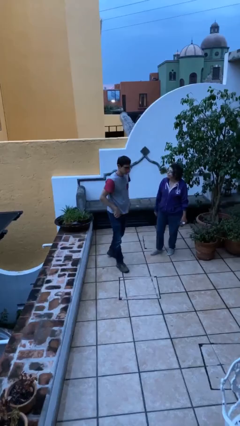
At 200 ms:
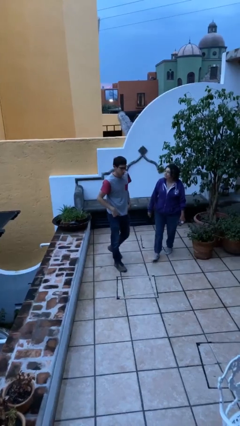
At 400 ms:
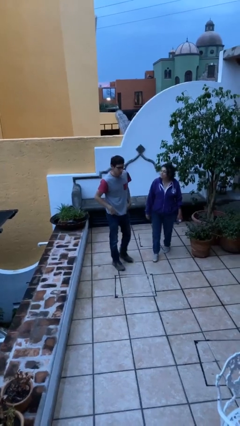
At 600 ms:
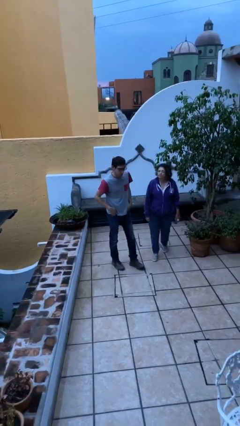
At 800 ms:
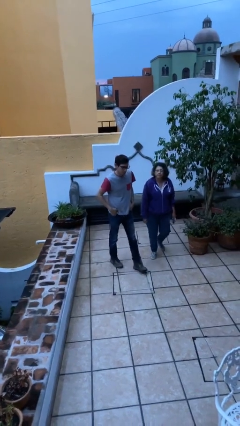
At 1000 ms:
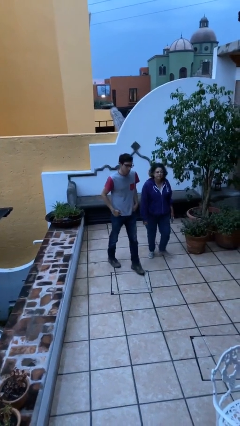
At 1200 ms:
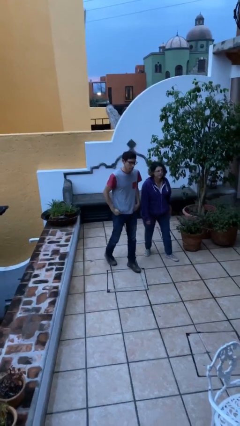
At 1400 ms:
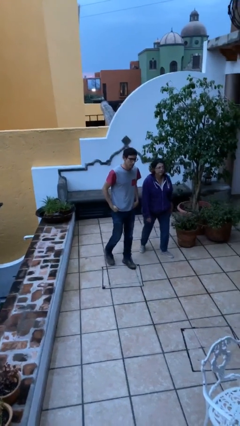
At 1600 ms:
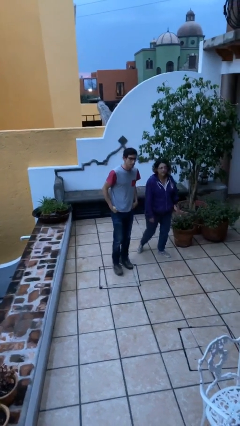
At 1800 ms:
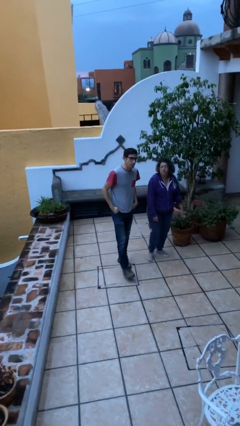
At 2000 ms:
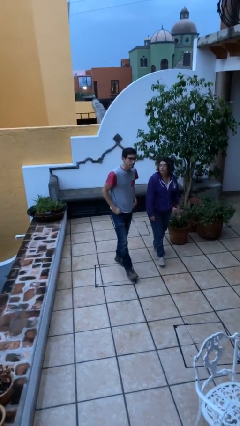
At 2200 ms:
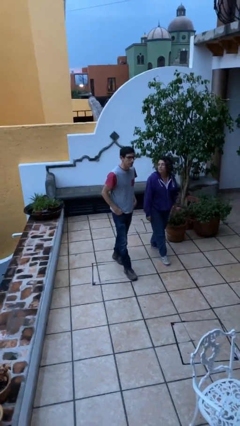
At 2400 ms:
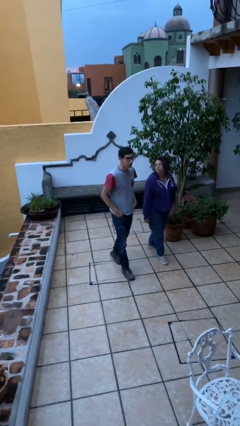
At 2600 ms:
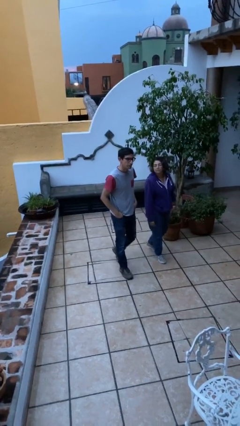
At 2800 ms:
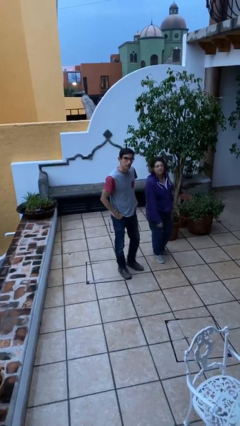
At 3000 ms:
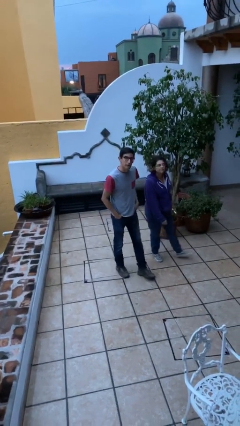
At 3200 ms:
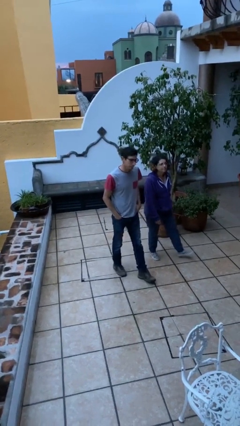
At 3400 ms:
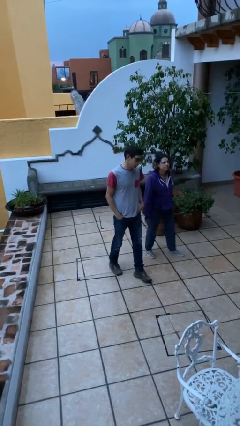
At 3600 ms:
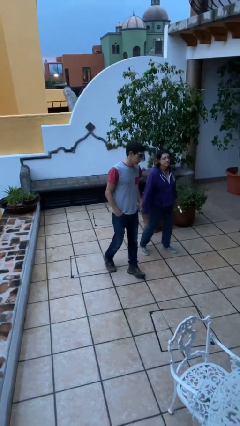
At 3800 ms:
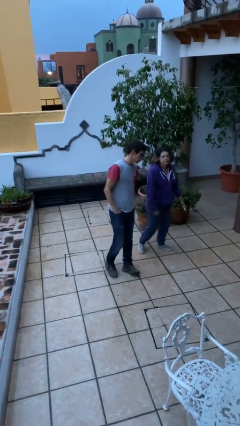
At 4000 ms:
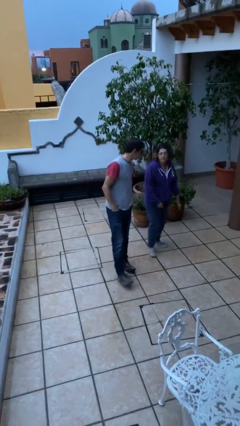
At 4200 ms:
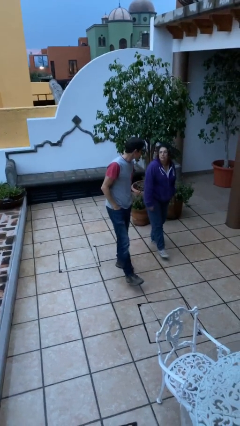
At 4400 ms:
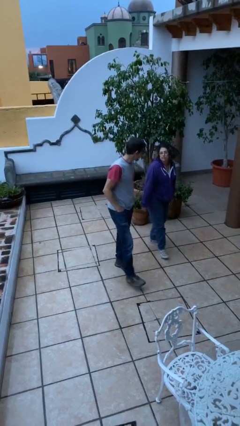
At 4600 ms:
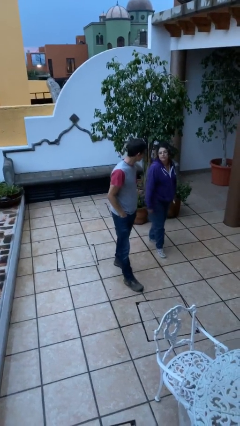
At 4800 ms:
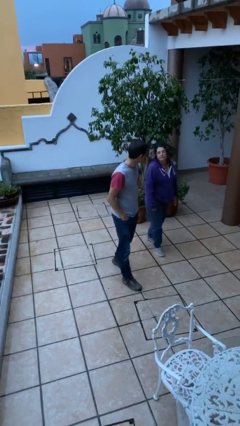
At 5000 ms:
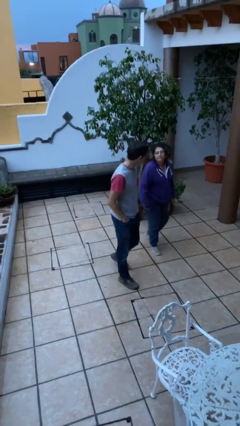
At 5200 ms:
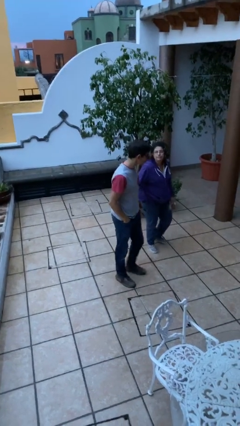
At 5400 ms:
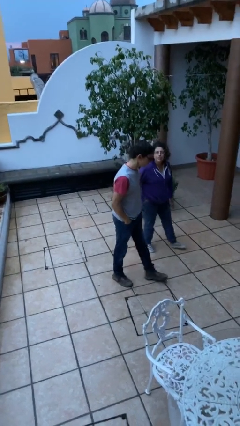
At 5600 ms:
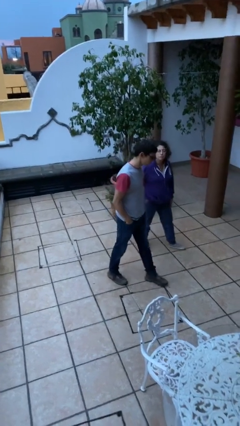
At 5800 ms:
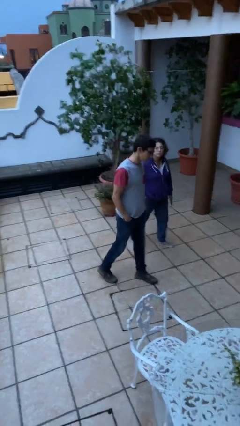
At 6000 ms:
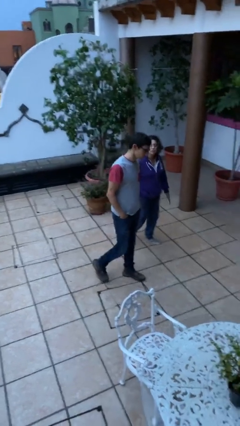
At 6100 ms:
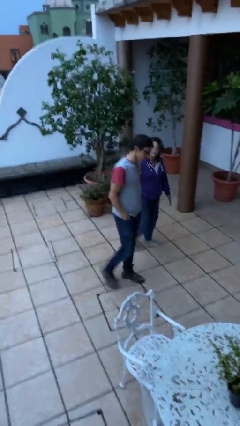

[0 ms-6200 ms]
person talks to person

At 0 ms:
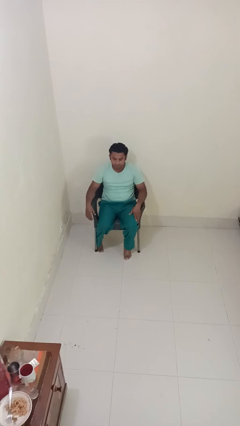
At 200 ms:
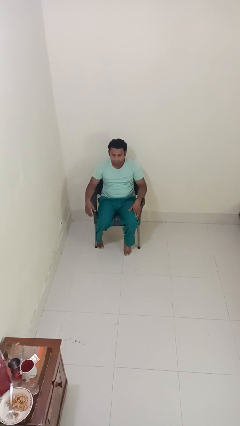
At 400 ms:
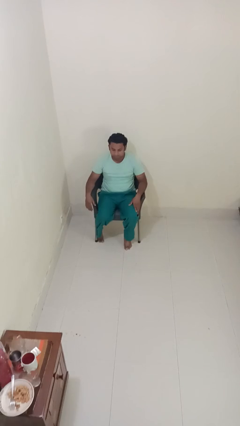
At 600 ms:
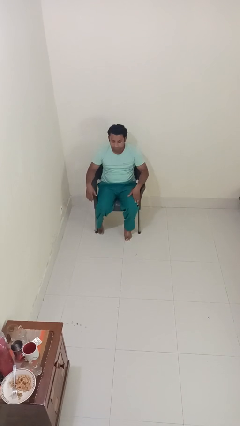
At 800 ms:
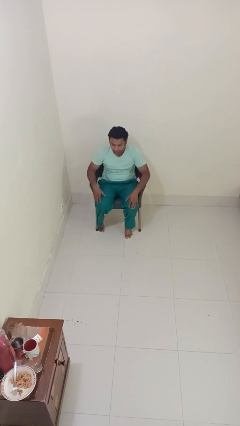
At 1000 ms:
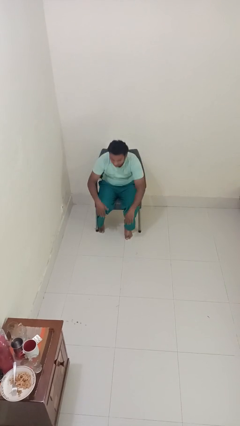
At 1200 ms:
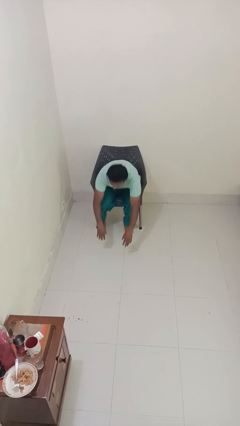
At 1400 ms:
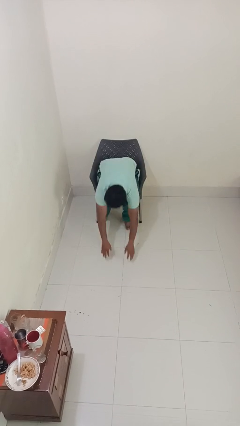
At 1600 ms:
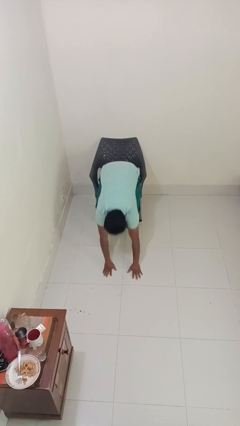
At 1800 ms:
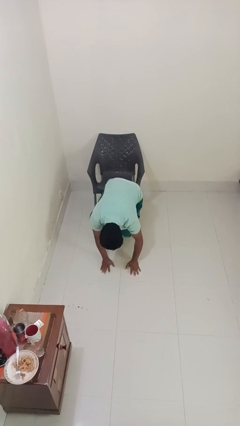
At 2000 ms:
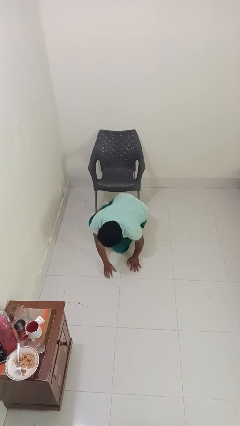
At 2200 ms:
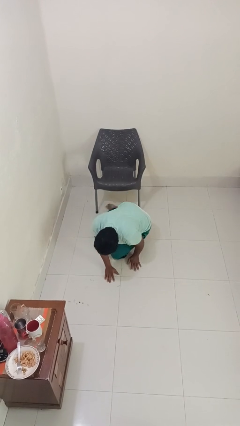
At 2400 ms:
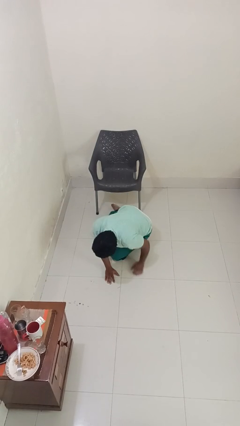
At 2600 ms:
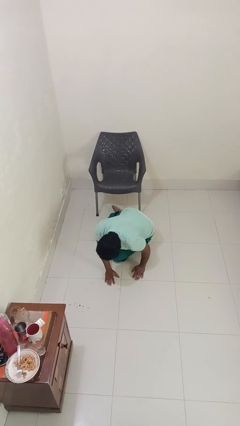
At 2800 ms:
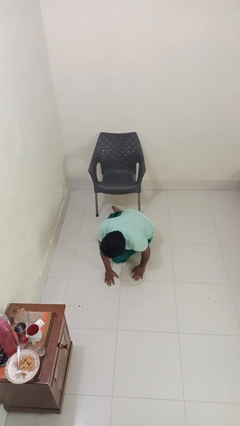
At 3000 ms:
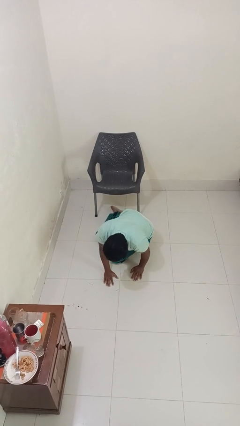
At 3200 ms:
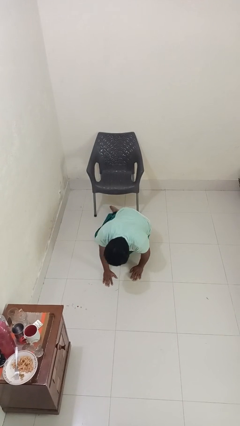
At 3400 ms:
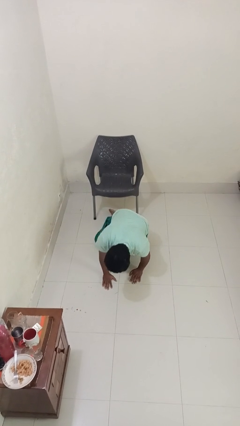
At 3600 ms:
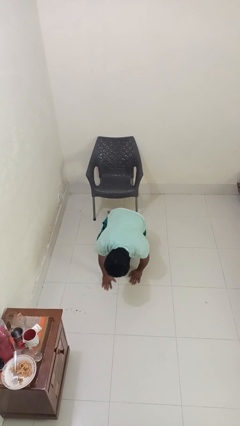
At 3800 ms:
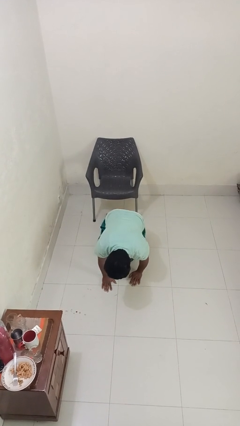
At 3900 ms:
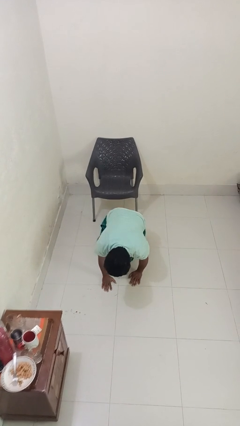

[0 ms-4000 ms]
person falls from chair

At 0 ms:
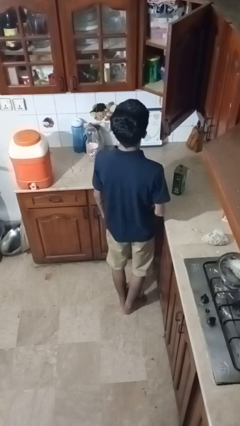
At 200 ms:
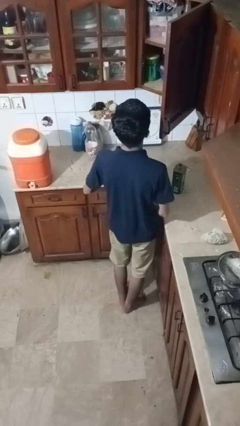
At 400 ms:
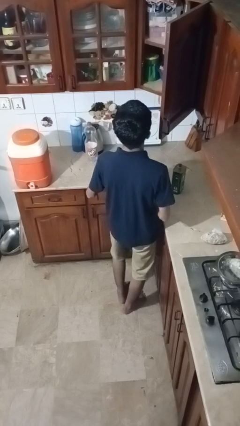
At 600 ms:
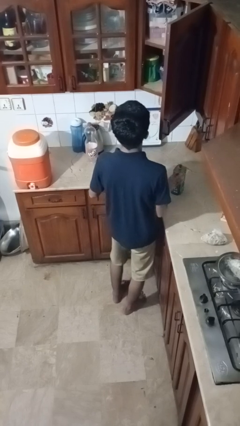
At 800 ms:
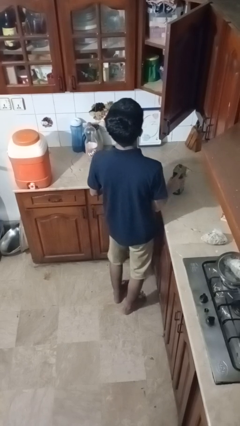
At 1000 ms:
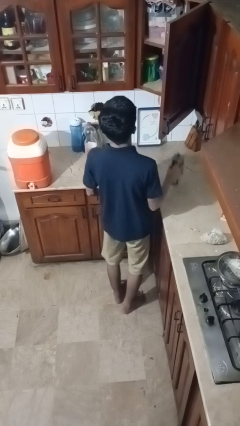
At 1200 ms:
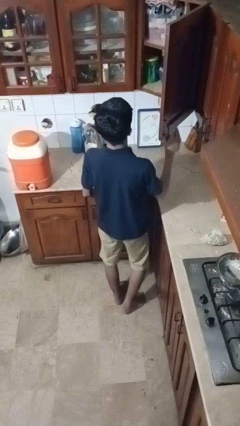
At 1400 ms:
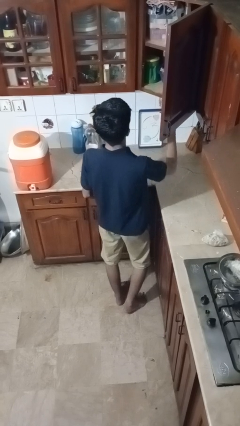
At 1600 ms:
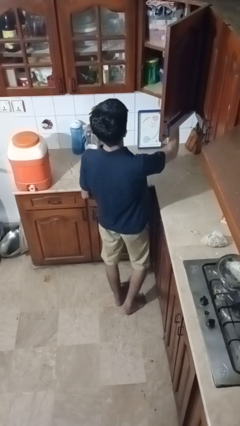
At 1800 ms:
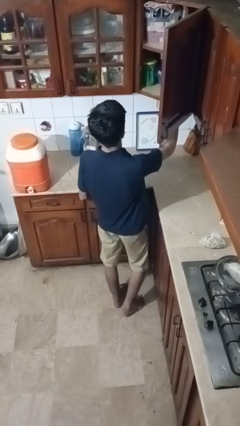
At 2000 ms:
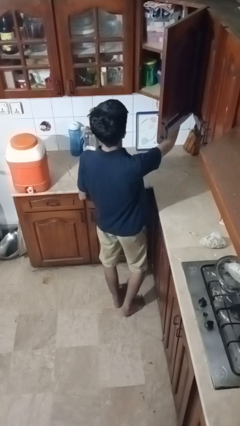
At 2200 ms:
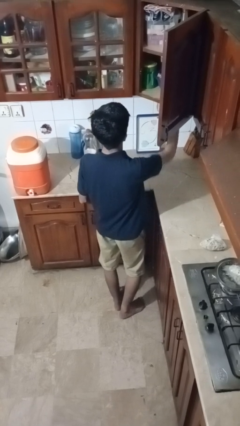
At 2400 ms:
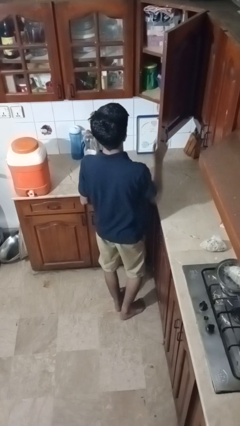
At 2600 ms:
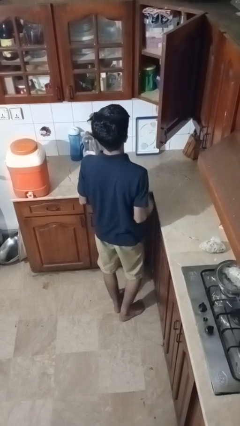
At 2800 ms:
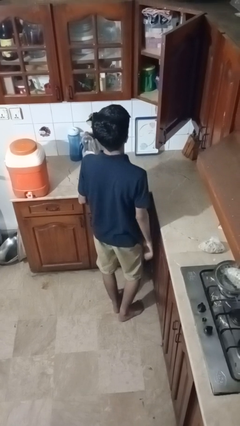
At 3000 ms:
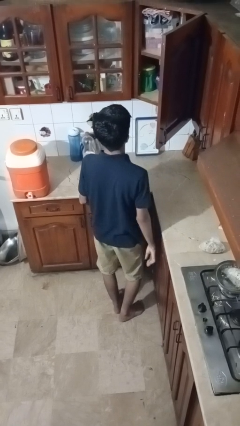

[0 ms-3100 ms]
person puts object in cabinet

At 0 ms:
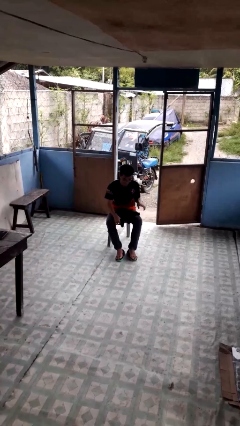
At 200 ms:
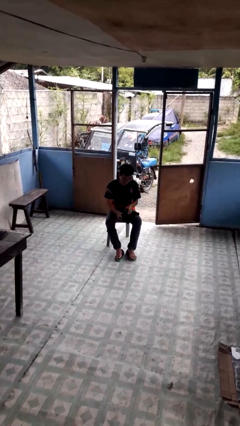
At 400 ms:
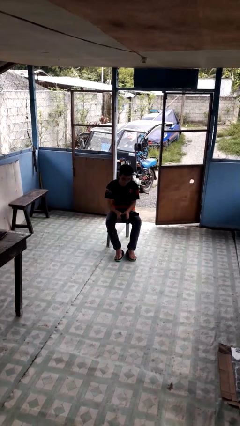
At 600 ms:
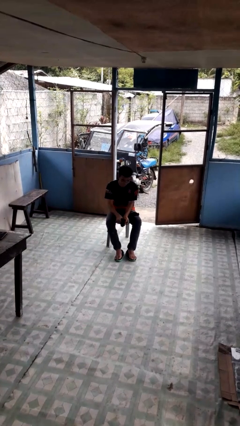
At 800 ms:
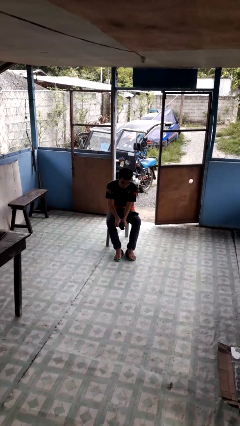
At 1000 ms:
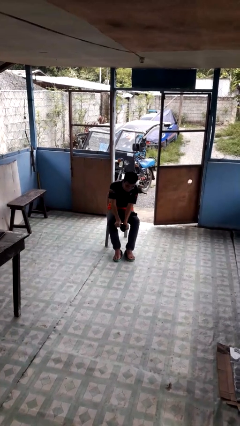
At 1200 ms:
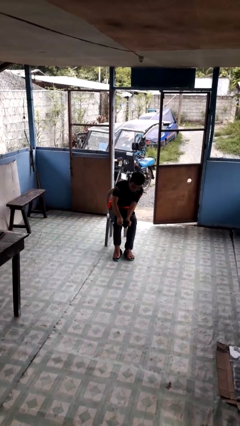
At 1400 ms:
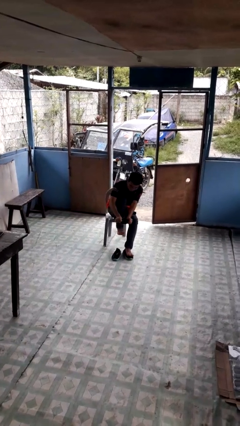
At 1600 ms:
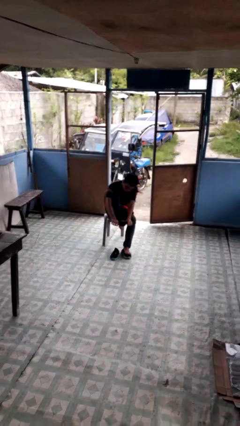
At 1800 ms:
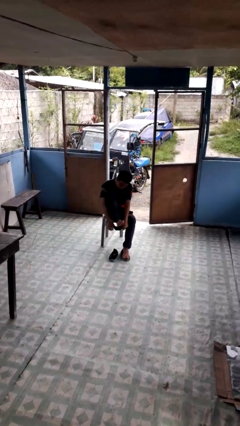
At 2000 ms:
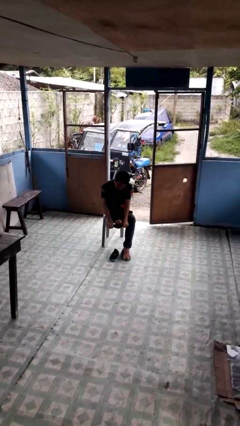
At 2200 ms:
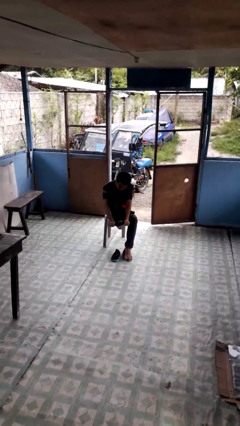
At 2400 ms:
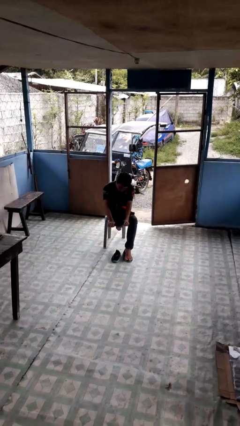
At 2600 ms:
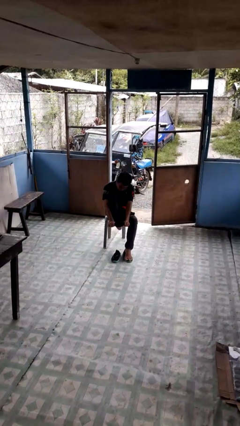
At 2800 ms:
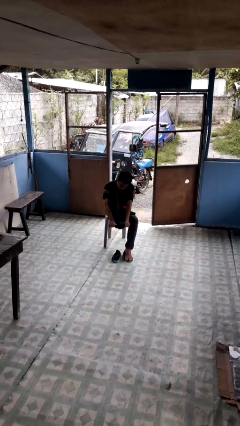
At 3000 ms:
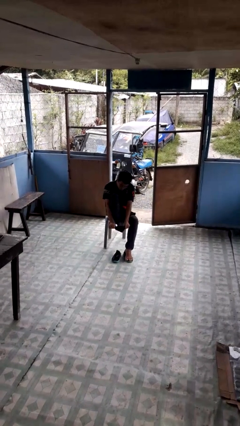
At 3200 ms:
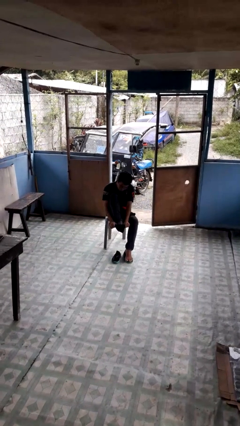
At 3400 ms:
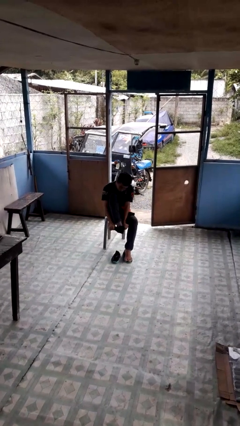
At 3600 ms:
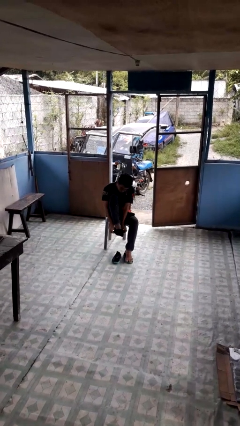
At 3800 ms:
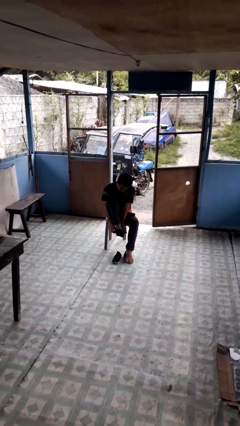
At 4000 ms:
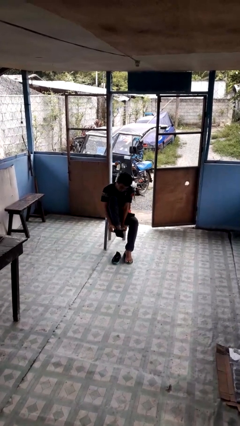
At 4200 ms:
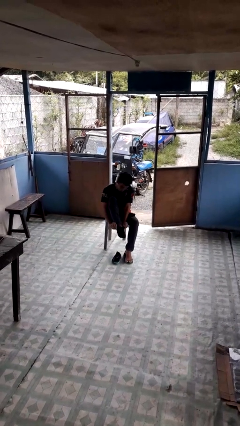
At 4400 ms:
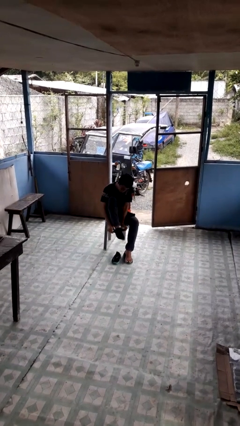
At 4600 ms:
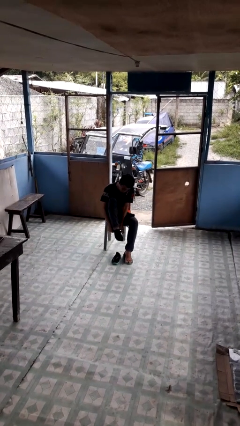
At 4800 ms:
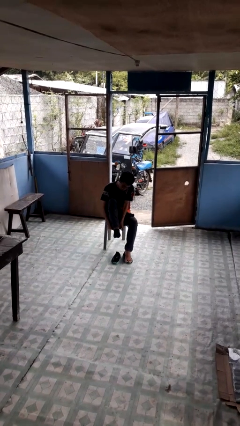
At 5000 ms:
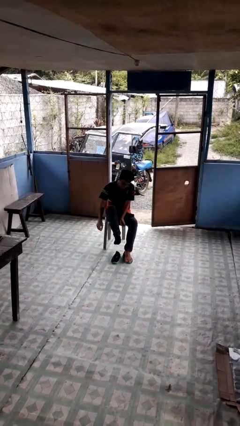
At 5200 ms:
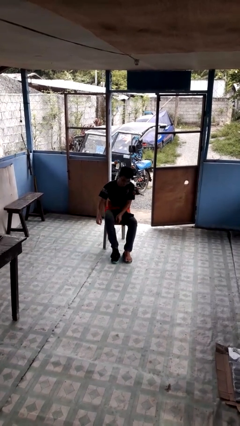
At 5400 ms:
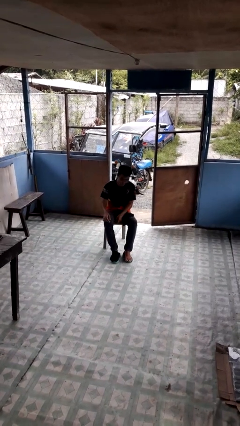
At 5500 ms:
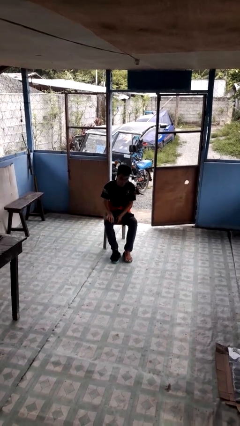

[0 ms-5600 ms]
person puts on socks
